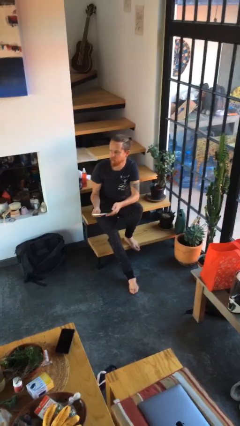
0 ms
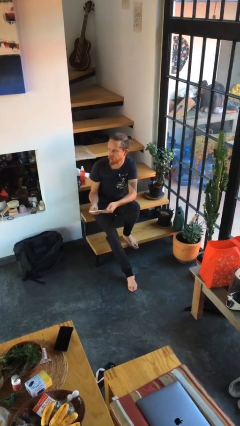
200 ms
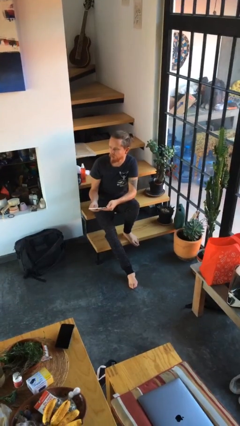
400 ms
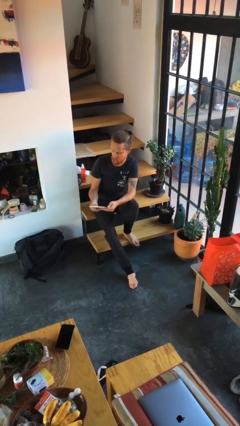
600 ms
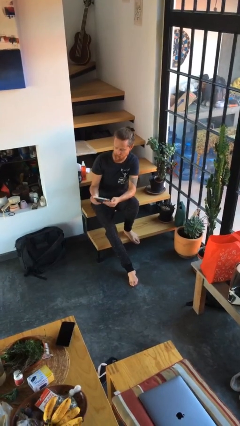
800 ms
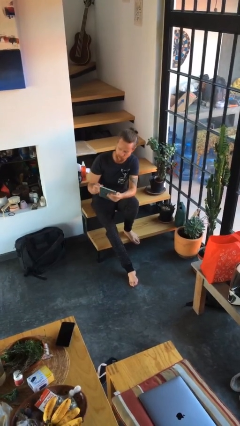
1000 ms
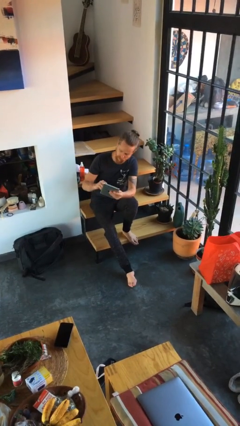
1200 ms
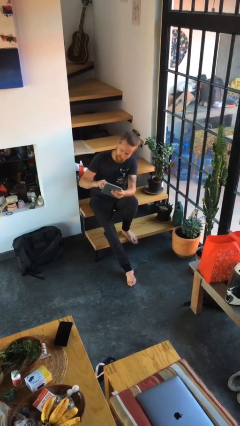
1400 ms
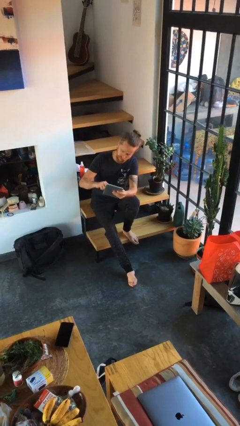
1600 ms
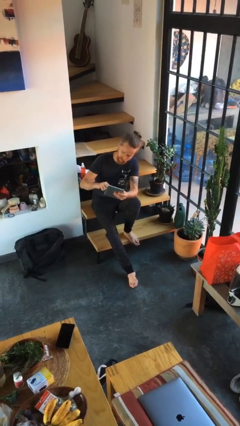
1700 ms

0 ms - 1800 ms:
person interacts with tablet

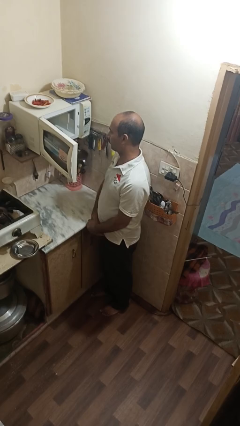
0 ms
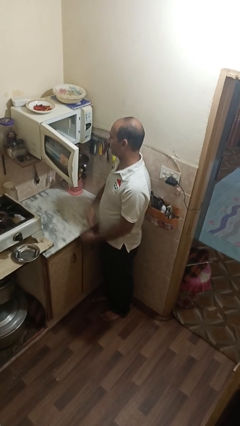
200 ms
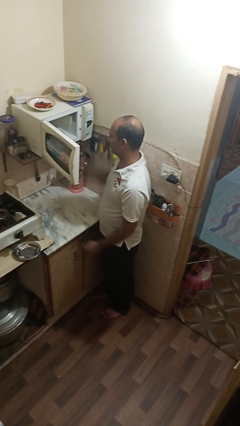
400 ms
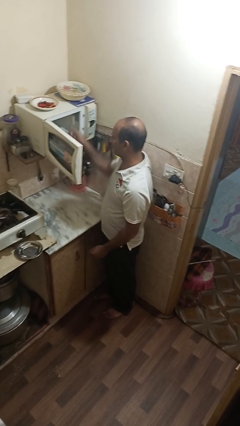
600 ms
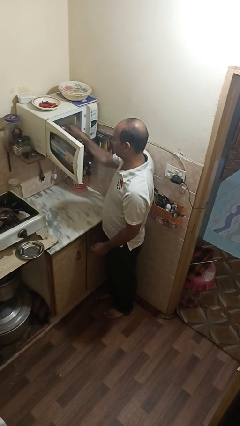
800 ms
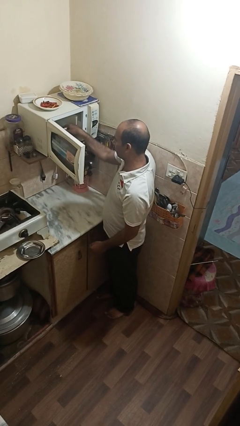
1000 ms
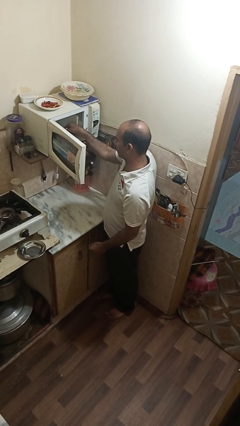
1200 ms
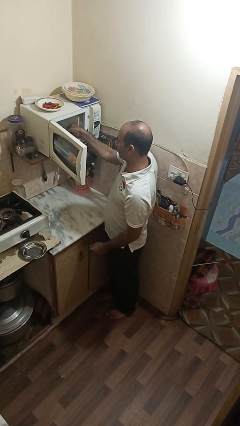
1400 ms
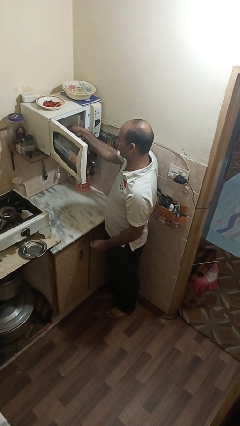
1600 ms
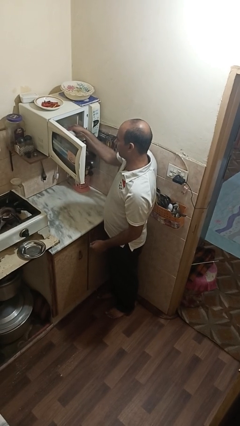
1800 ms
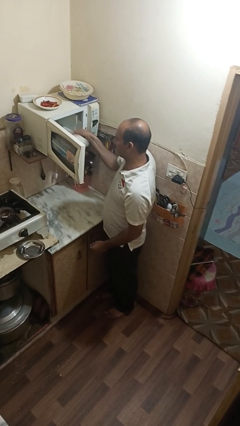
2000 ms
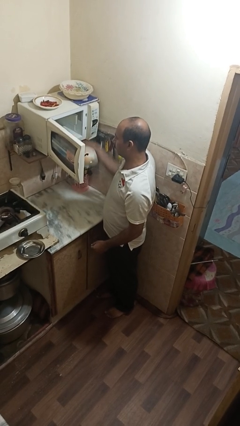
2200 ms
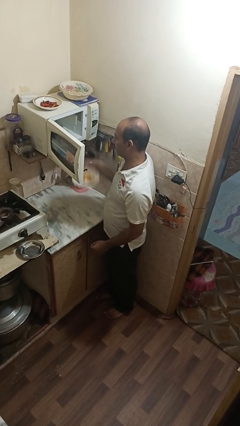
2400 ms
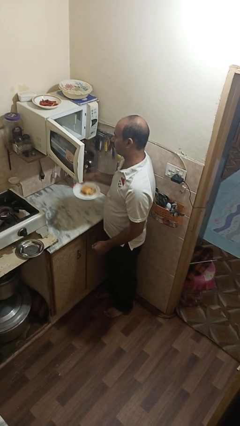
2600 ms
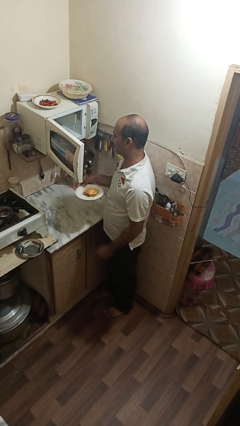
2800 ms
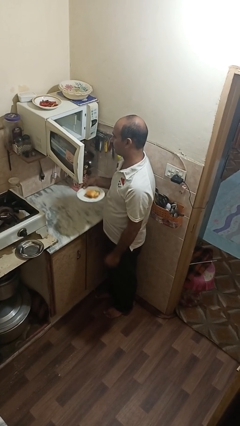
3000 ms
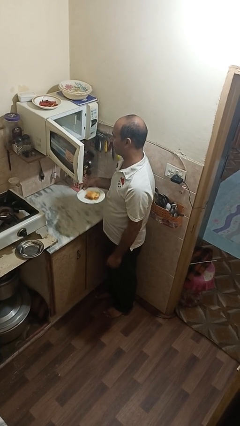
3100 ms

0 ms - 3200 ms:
person takes object from microwave

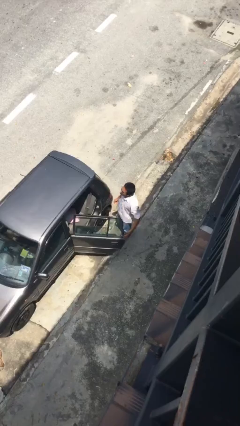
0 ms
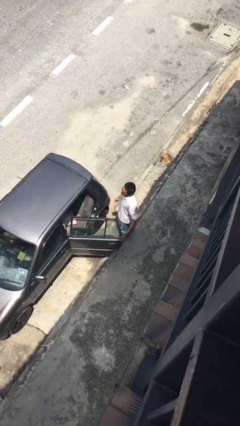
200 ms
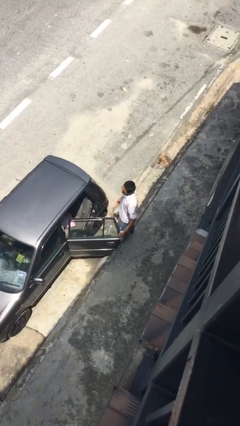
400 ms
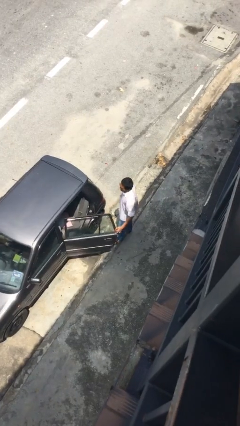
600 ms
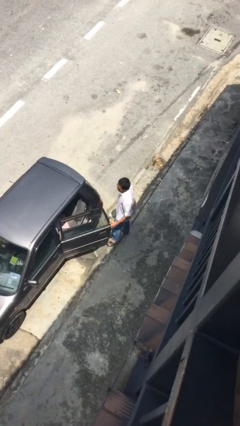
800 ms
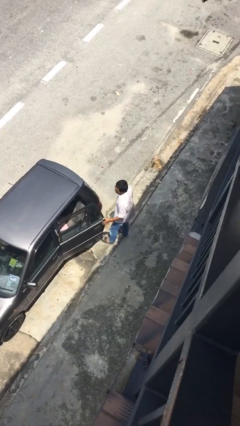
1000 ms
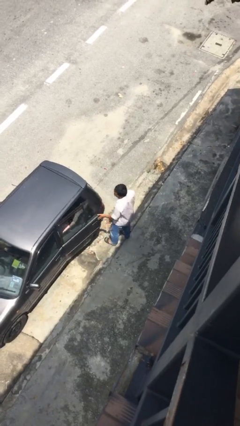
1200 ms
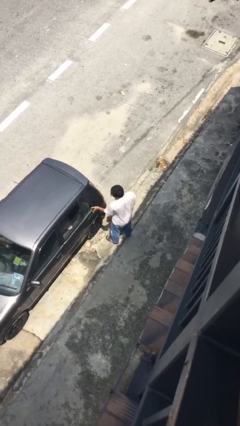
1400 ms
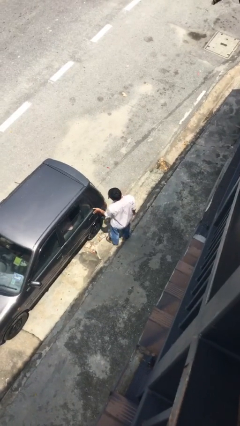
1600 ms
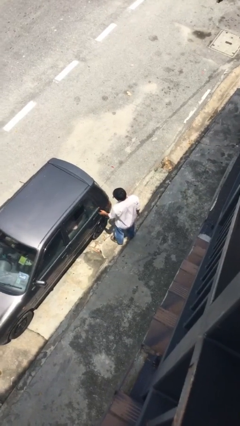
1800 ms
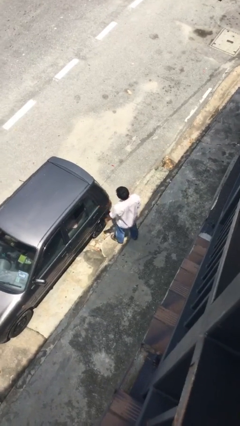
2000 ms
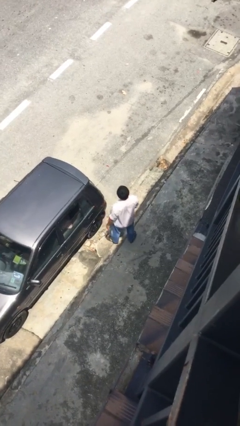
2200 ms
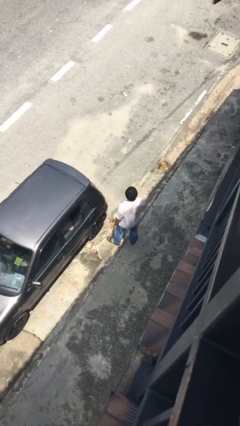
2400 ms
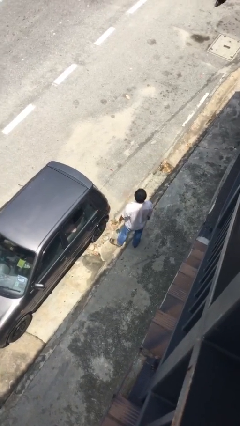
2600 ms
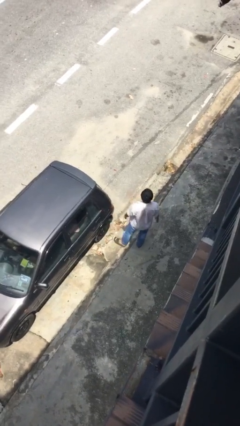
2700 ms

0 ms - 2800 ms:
person closes car door

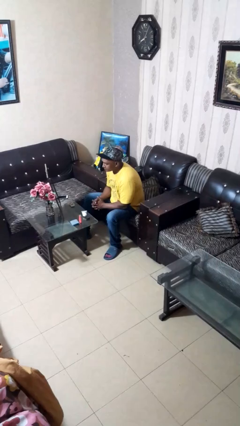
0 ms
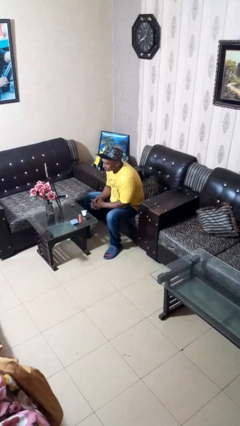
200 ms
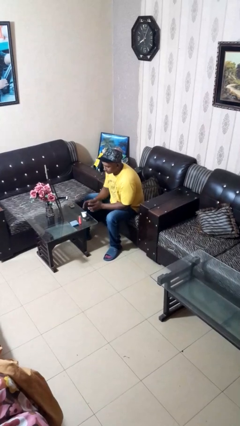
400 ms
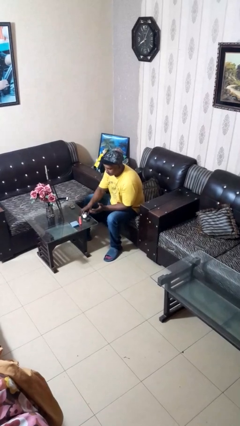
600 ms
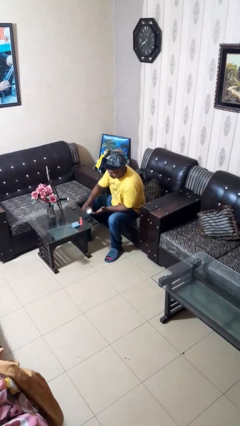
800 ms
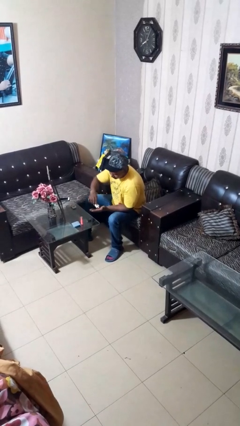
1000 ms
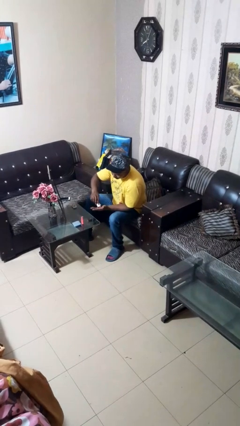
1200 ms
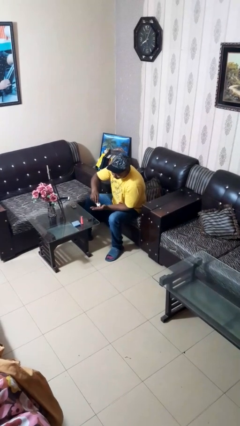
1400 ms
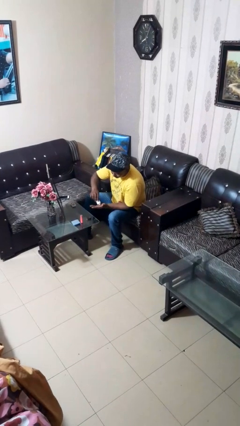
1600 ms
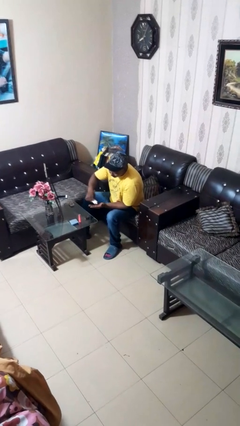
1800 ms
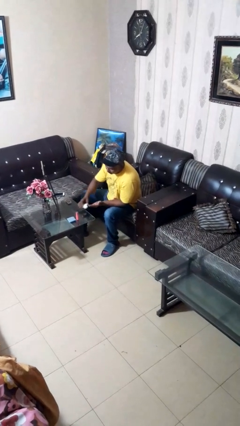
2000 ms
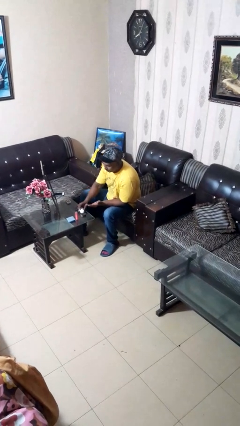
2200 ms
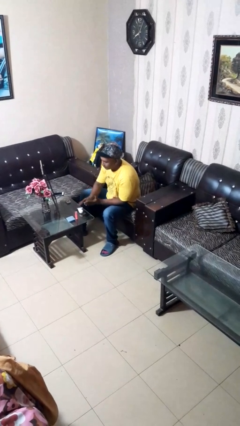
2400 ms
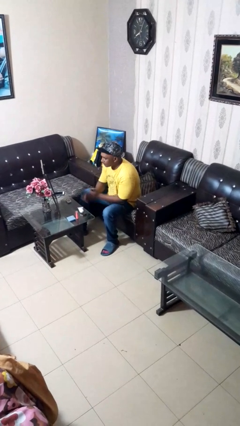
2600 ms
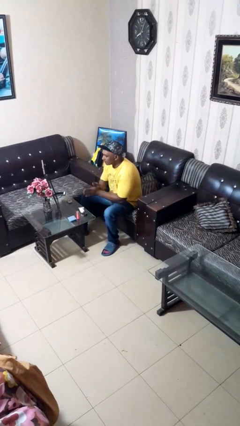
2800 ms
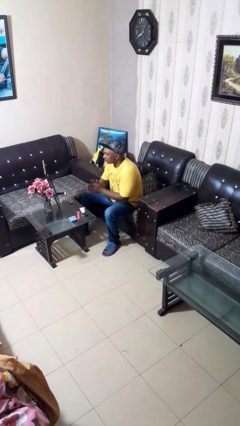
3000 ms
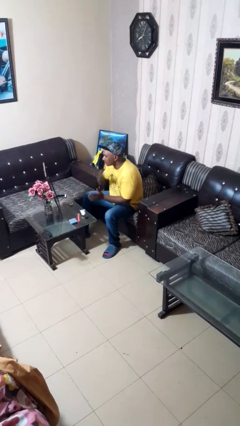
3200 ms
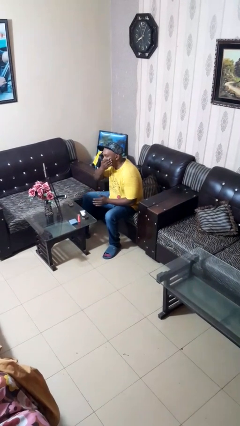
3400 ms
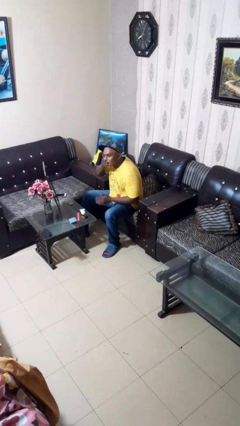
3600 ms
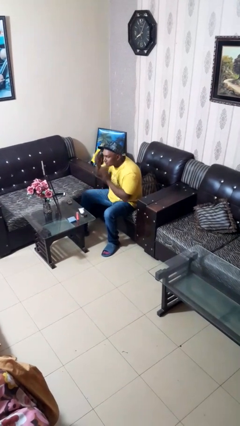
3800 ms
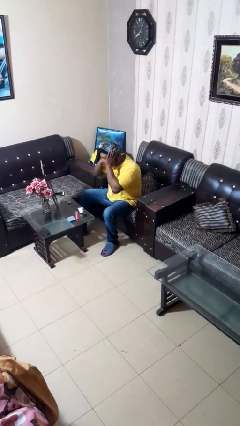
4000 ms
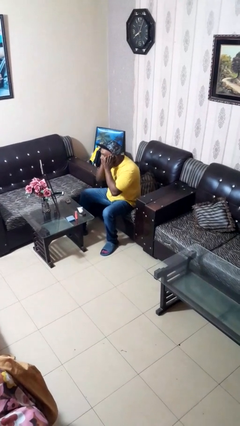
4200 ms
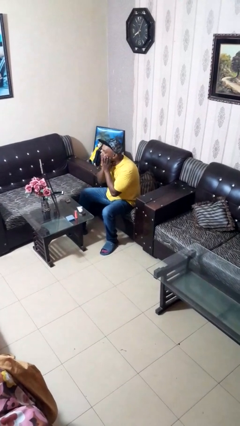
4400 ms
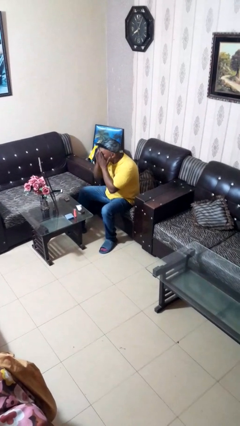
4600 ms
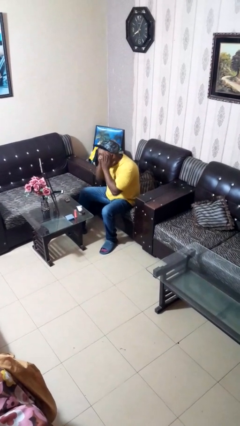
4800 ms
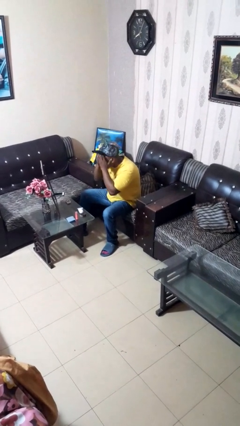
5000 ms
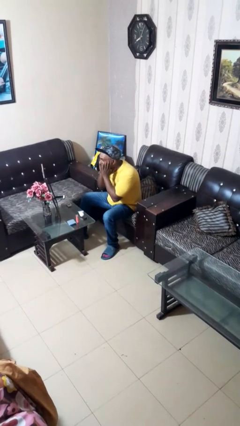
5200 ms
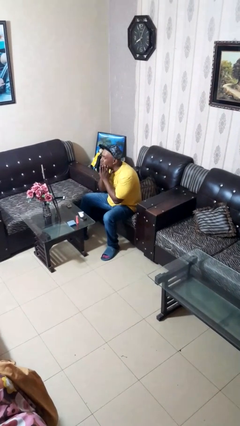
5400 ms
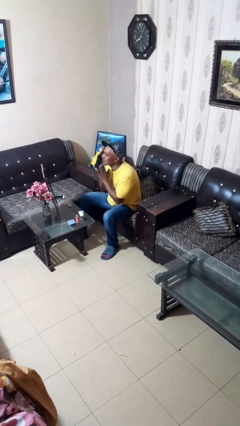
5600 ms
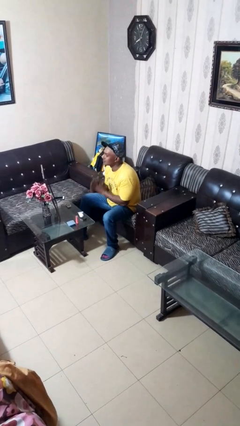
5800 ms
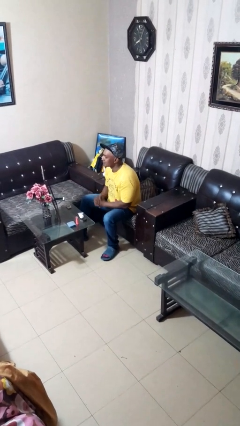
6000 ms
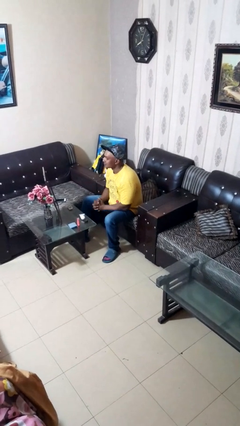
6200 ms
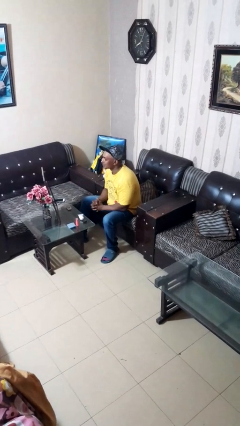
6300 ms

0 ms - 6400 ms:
person applies foundation makeup

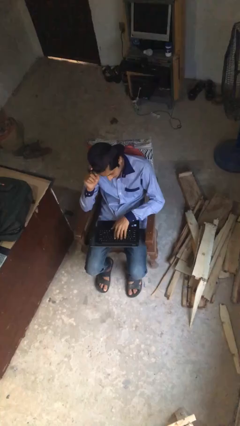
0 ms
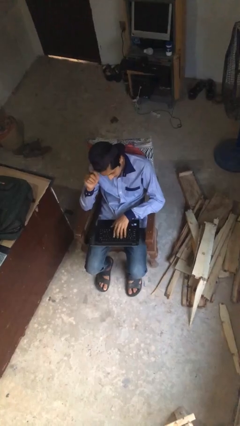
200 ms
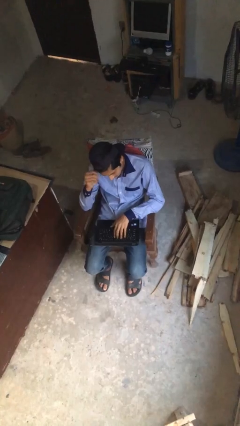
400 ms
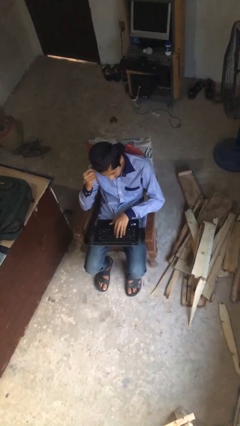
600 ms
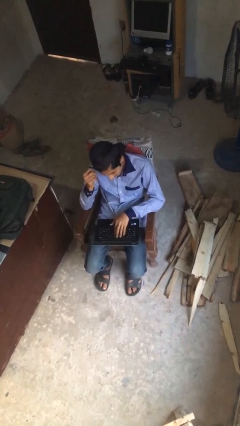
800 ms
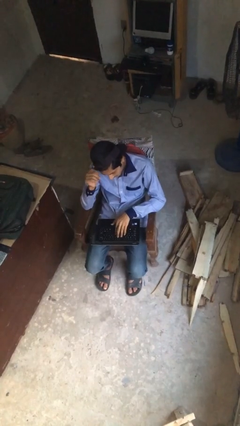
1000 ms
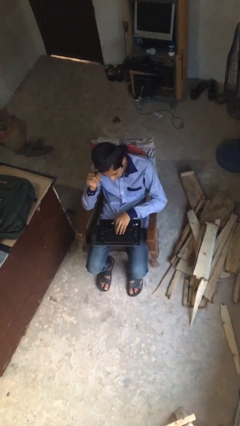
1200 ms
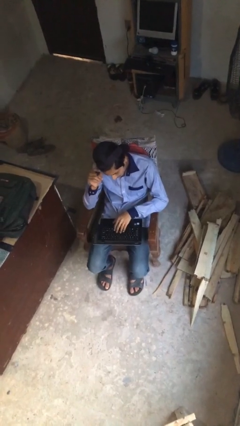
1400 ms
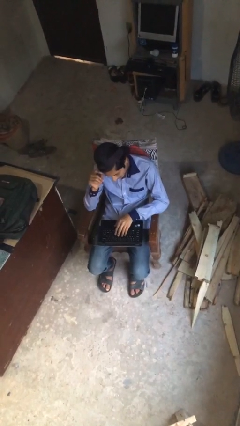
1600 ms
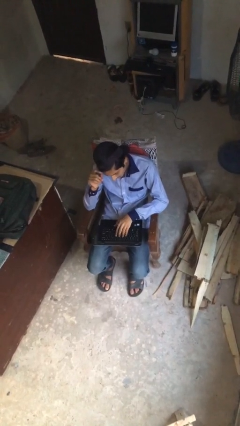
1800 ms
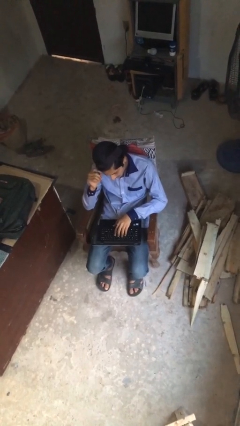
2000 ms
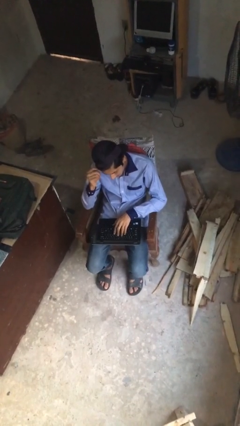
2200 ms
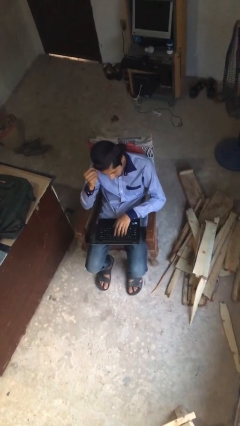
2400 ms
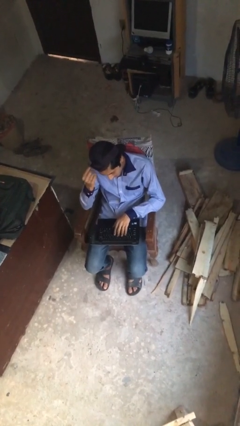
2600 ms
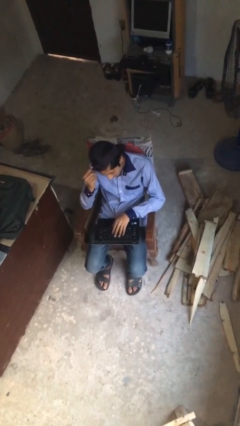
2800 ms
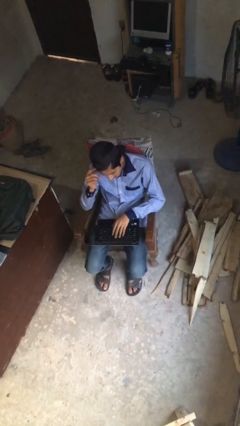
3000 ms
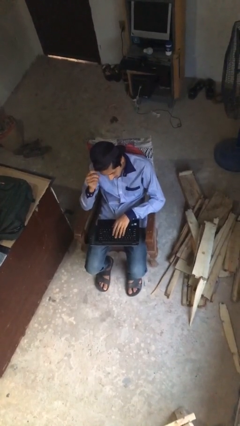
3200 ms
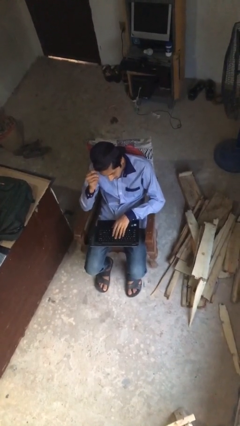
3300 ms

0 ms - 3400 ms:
person interacts with laptop
